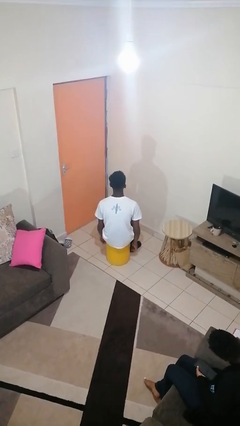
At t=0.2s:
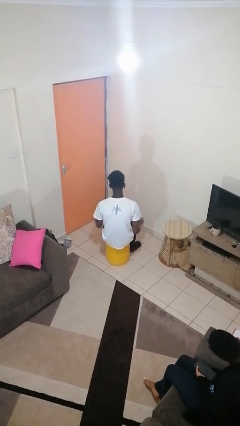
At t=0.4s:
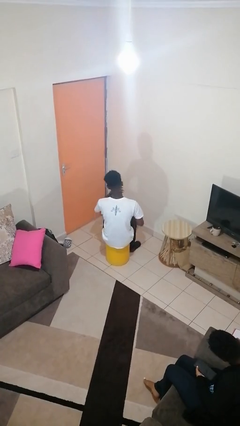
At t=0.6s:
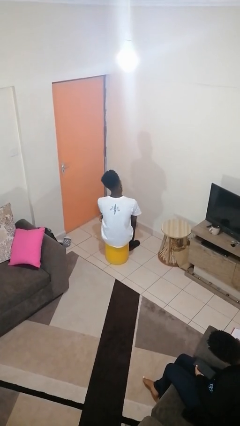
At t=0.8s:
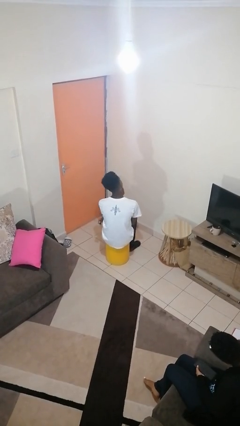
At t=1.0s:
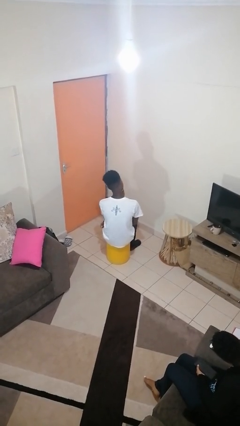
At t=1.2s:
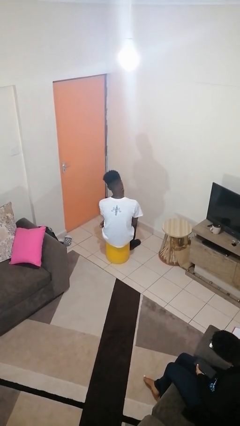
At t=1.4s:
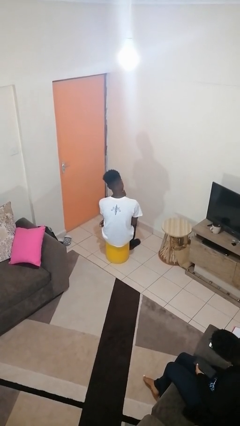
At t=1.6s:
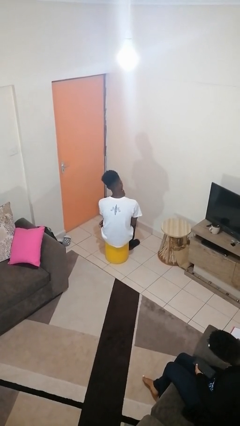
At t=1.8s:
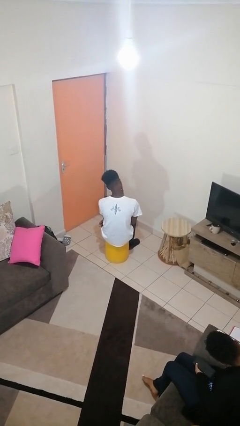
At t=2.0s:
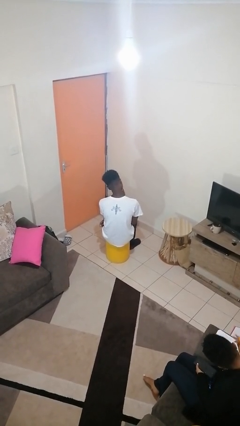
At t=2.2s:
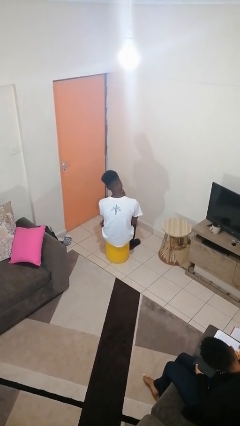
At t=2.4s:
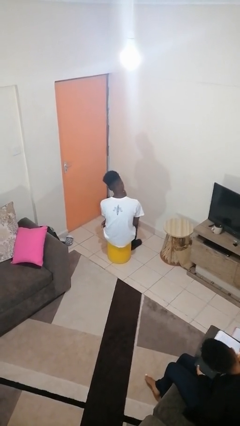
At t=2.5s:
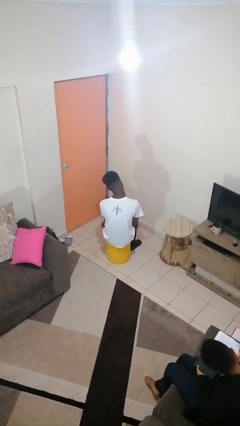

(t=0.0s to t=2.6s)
person strokes chin

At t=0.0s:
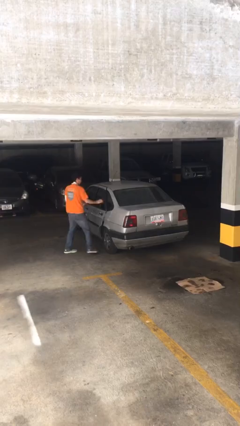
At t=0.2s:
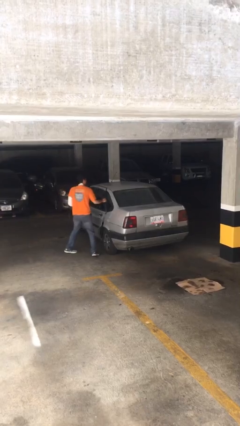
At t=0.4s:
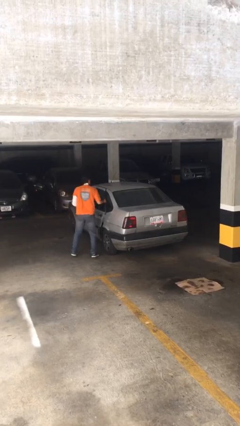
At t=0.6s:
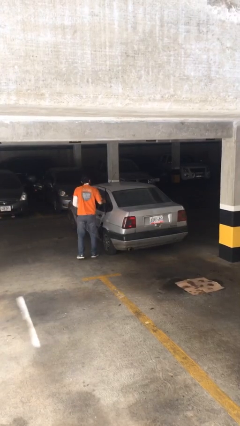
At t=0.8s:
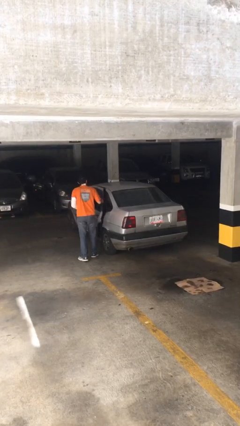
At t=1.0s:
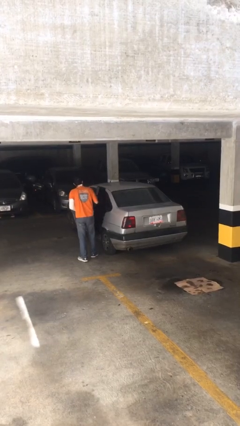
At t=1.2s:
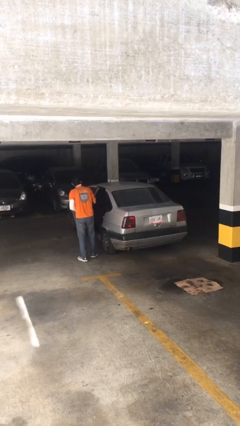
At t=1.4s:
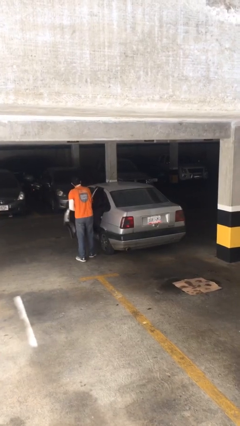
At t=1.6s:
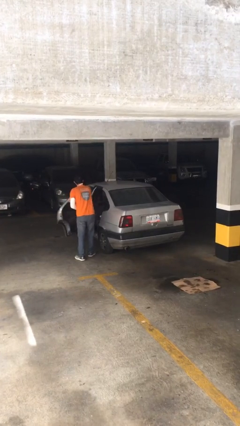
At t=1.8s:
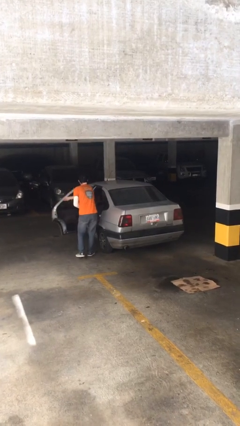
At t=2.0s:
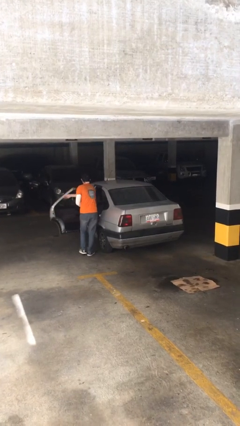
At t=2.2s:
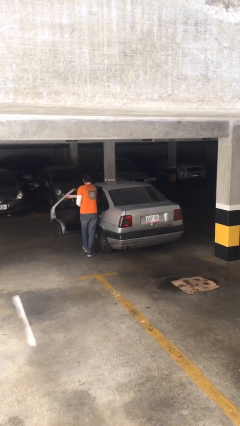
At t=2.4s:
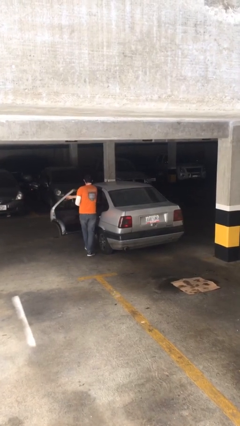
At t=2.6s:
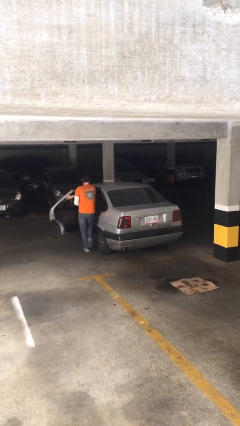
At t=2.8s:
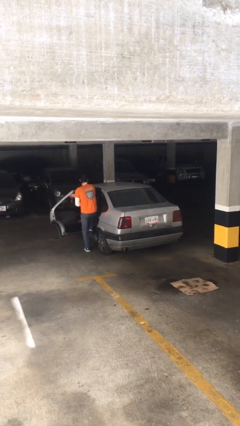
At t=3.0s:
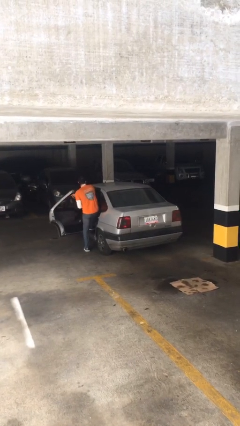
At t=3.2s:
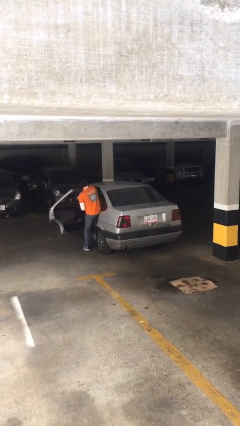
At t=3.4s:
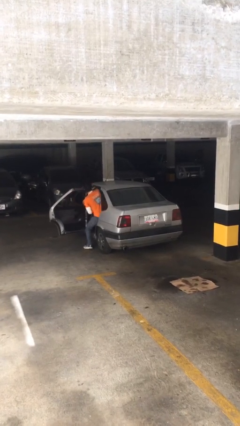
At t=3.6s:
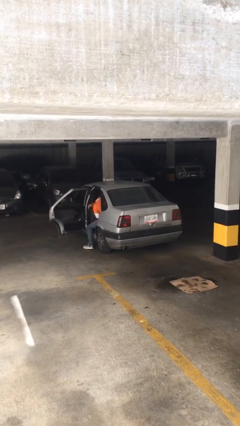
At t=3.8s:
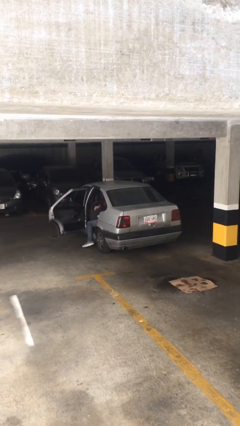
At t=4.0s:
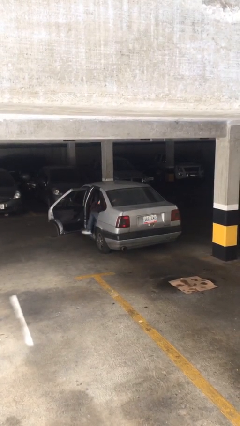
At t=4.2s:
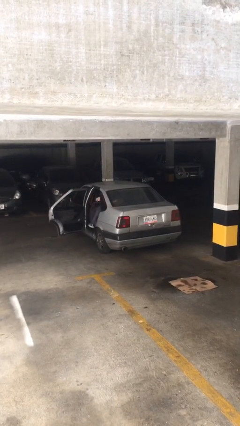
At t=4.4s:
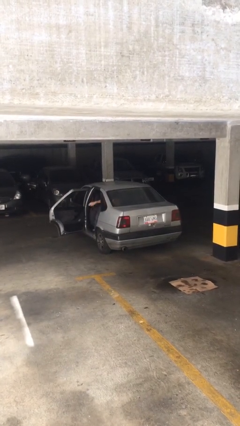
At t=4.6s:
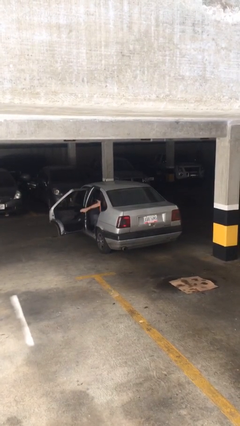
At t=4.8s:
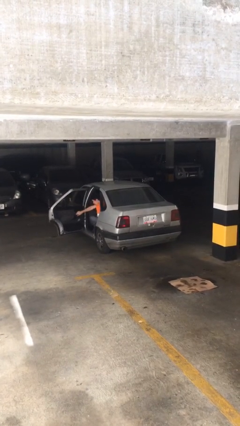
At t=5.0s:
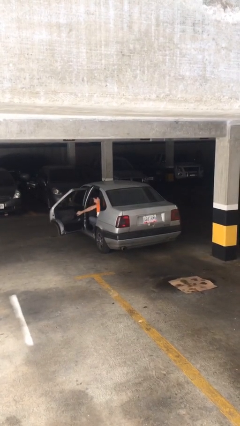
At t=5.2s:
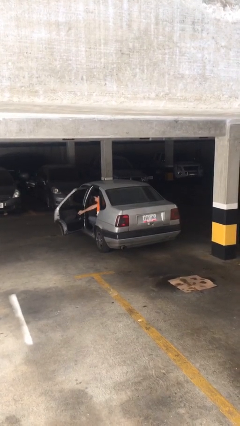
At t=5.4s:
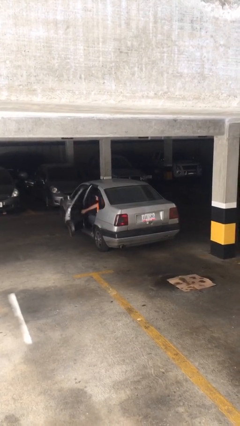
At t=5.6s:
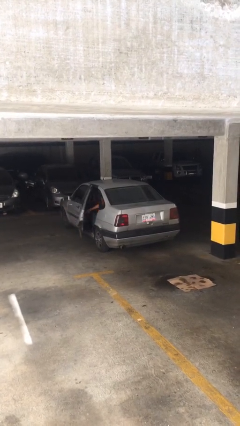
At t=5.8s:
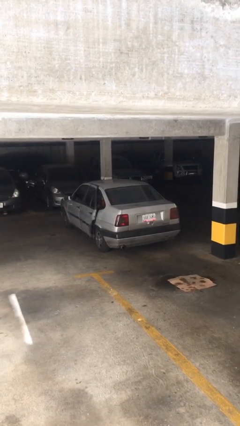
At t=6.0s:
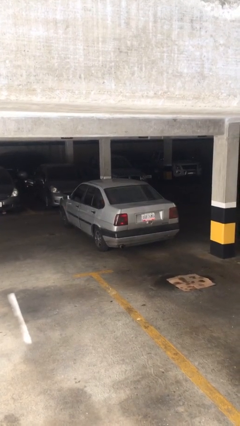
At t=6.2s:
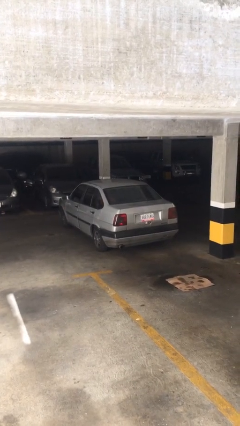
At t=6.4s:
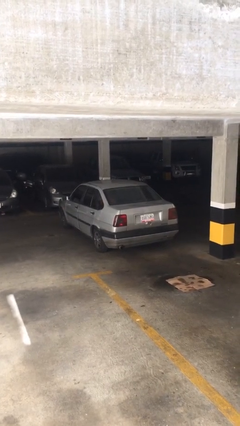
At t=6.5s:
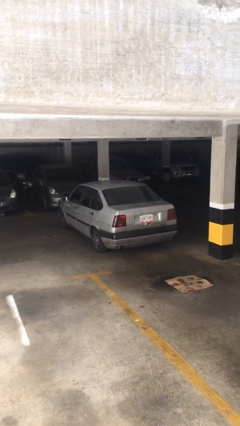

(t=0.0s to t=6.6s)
car picks up person

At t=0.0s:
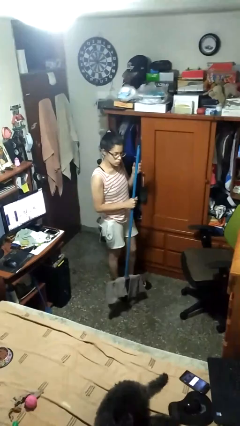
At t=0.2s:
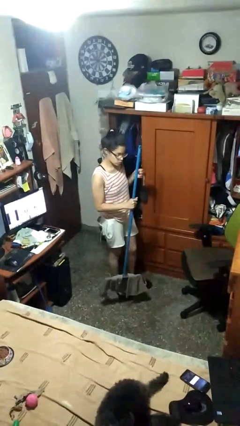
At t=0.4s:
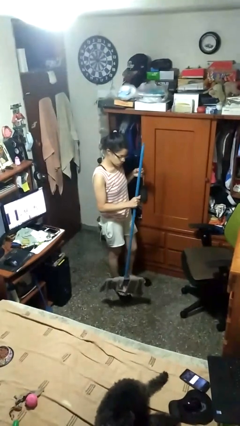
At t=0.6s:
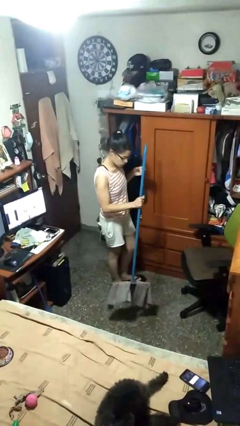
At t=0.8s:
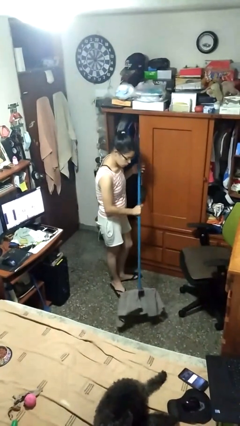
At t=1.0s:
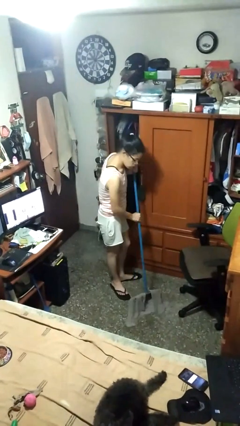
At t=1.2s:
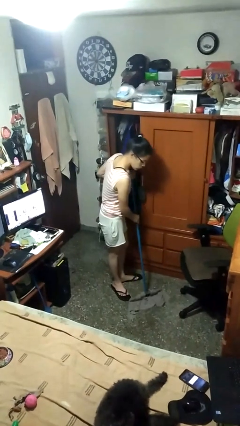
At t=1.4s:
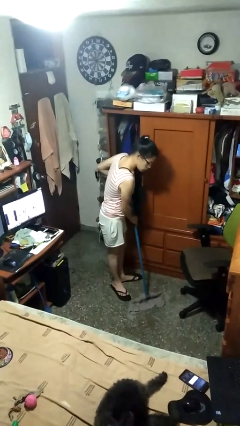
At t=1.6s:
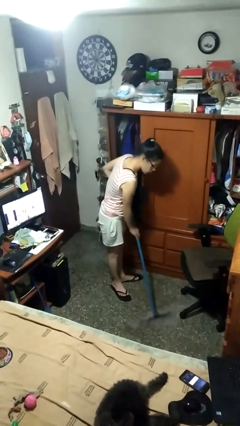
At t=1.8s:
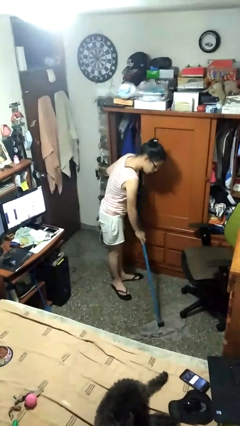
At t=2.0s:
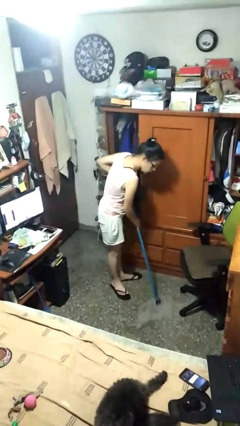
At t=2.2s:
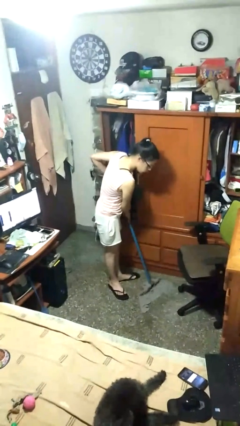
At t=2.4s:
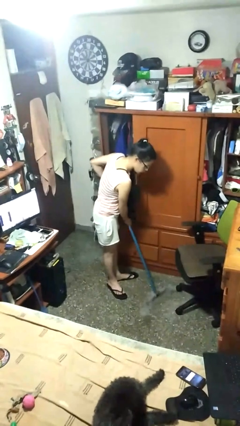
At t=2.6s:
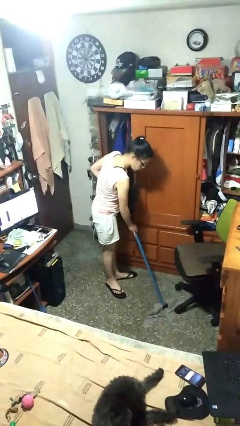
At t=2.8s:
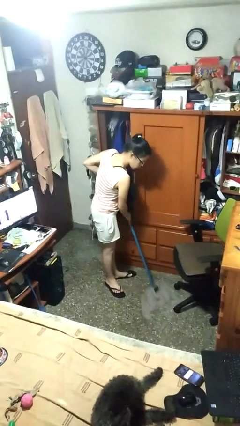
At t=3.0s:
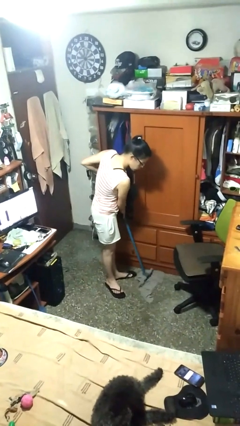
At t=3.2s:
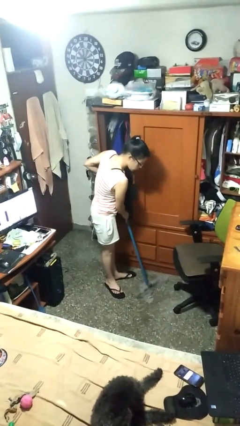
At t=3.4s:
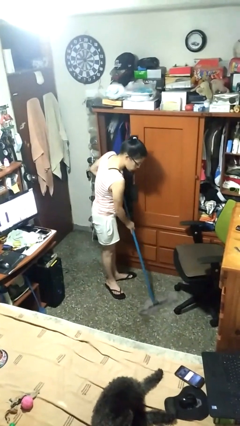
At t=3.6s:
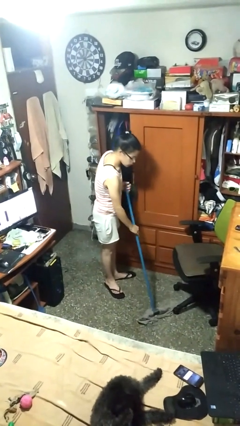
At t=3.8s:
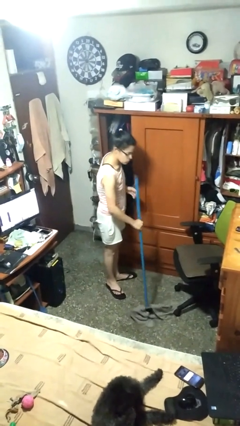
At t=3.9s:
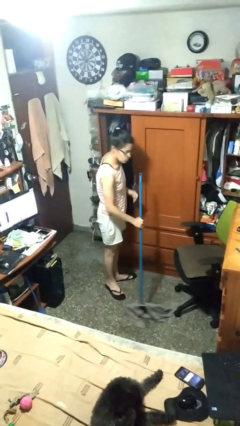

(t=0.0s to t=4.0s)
person mops

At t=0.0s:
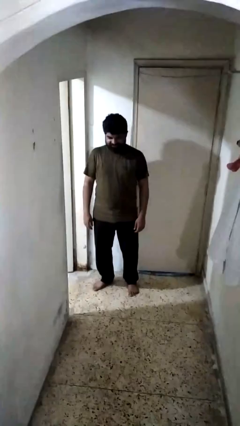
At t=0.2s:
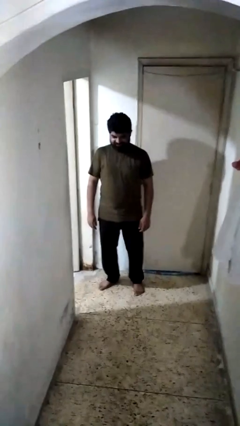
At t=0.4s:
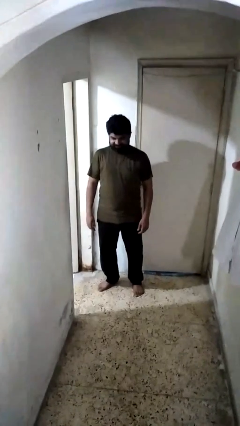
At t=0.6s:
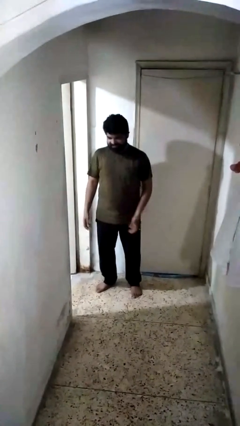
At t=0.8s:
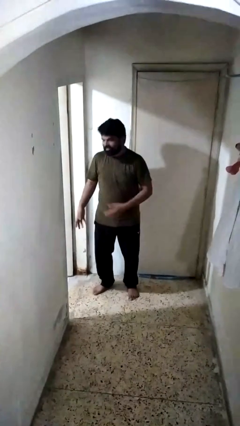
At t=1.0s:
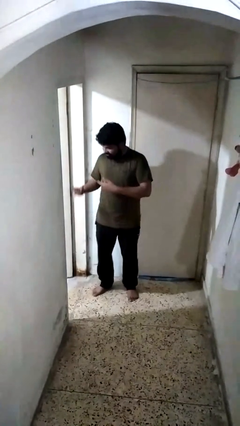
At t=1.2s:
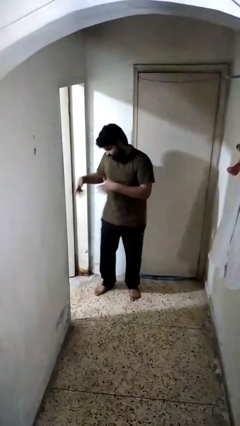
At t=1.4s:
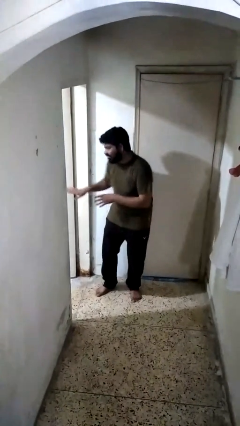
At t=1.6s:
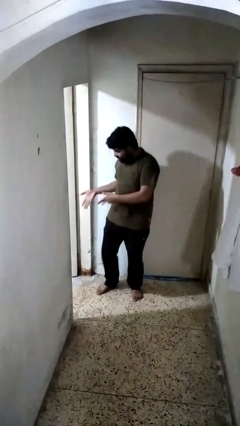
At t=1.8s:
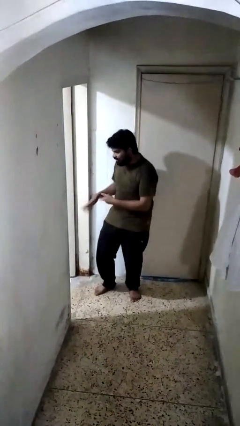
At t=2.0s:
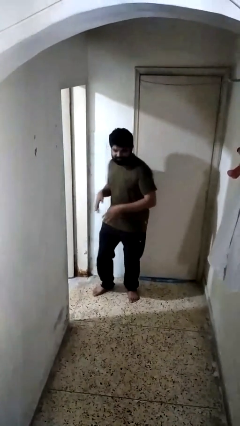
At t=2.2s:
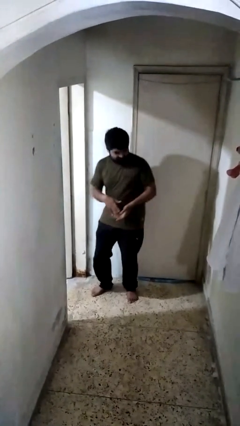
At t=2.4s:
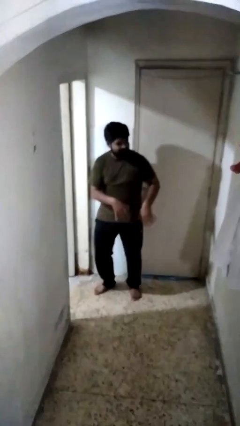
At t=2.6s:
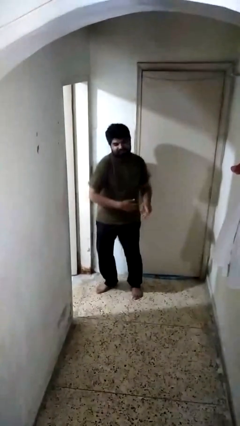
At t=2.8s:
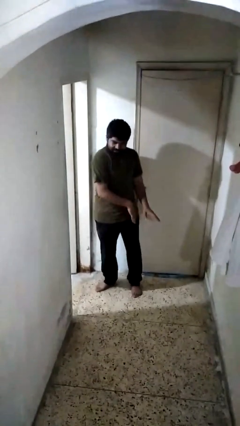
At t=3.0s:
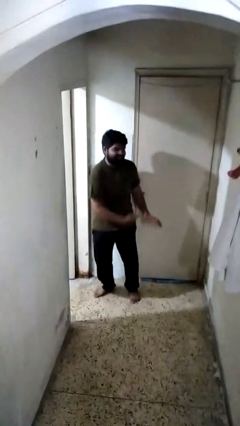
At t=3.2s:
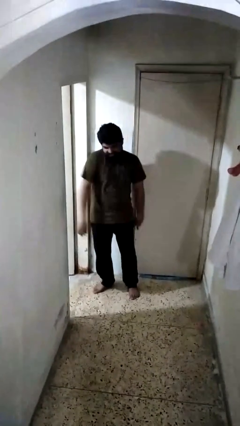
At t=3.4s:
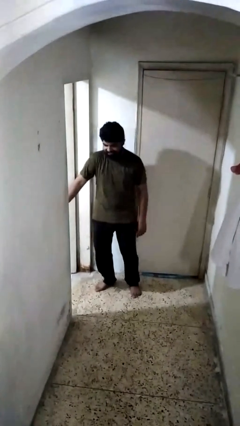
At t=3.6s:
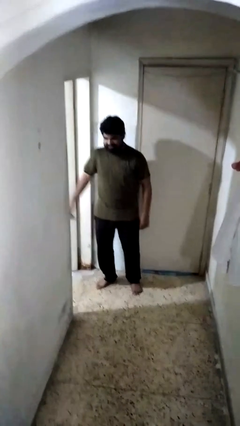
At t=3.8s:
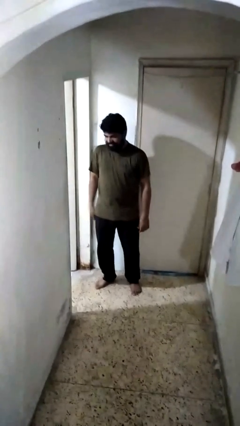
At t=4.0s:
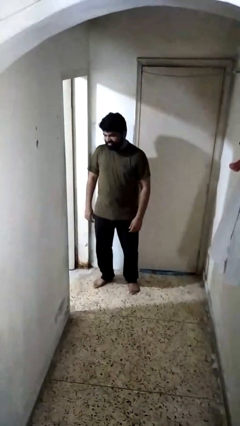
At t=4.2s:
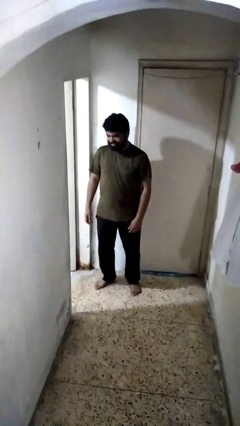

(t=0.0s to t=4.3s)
person dances in place

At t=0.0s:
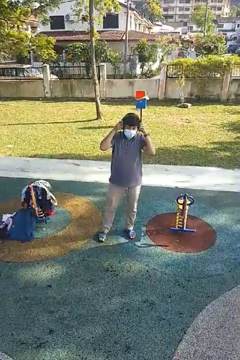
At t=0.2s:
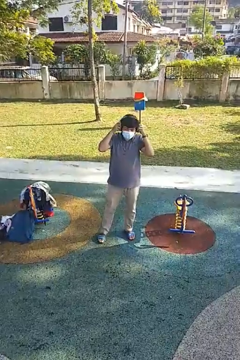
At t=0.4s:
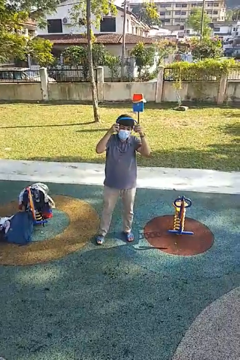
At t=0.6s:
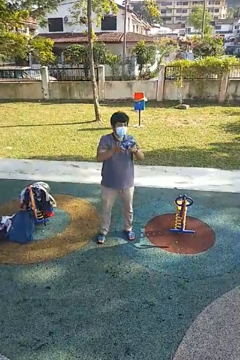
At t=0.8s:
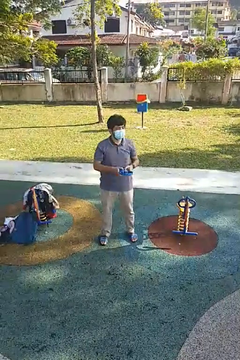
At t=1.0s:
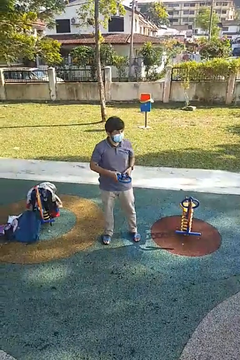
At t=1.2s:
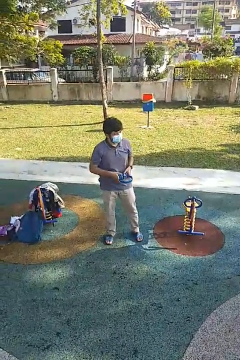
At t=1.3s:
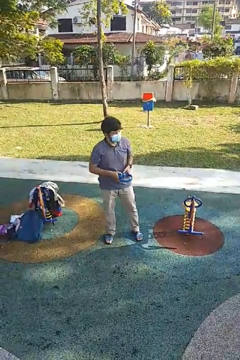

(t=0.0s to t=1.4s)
person takes off headphones
